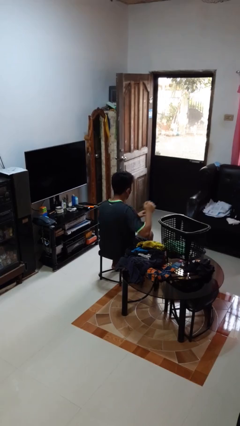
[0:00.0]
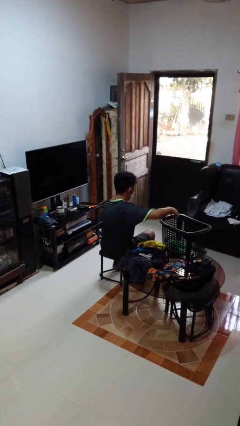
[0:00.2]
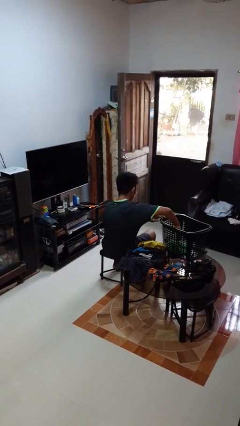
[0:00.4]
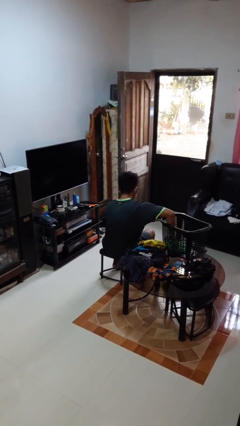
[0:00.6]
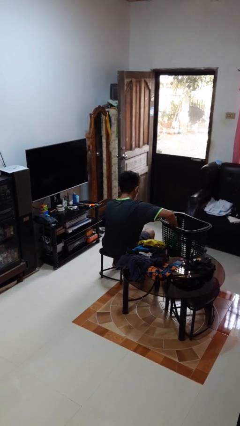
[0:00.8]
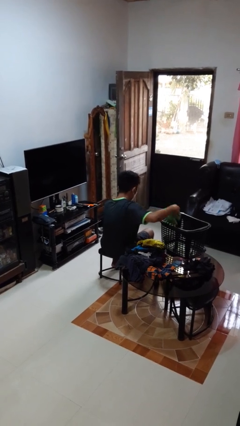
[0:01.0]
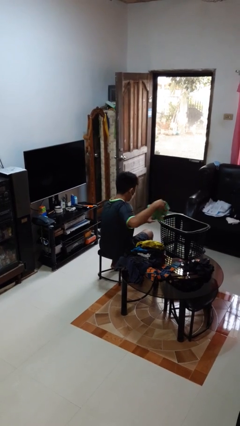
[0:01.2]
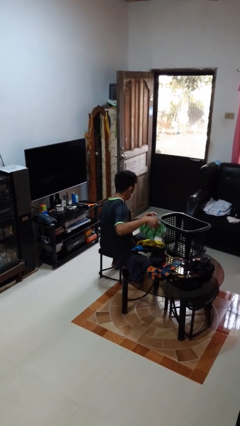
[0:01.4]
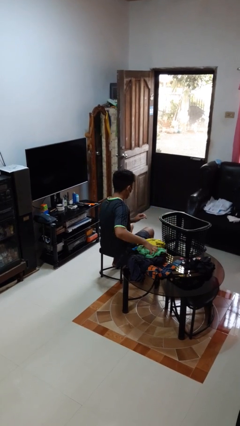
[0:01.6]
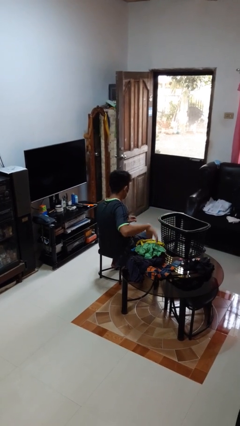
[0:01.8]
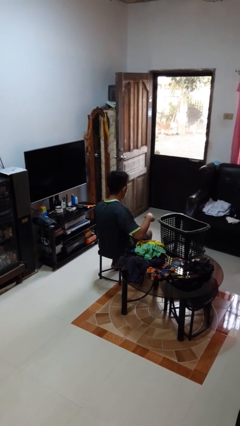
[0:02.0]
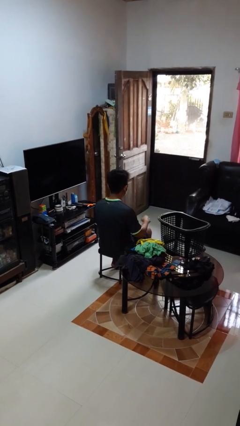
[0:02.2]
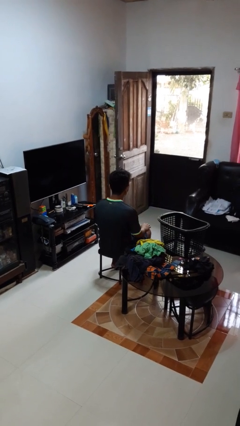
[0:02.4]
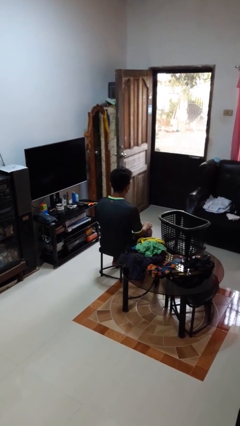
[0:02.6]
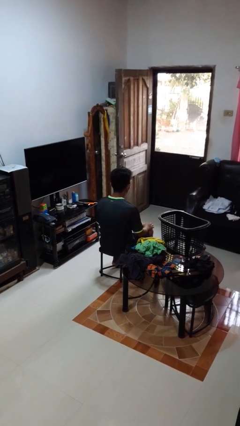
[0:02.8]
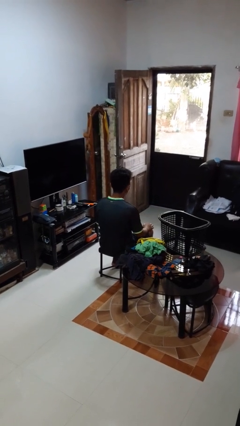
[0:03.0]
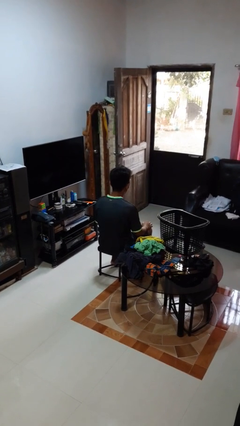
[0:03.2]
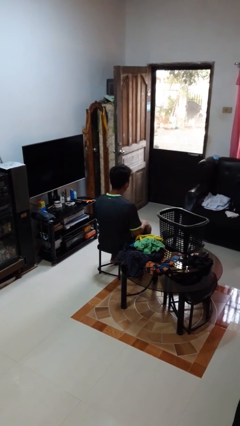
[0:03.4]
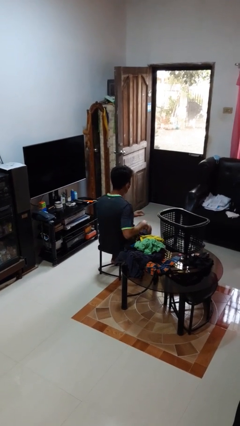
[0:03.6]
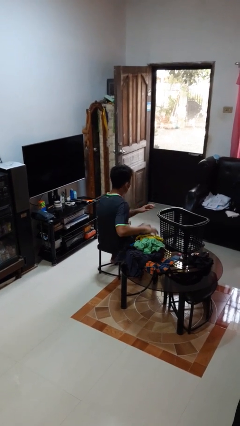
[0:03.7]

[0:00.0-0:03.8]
person takes object from basket

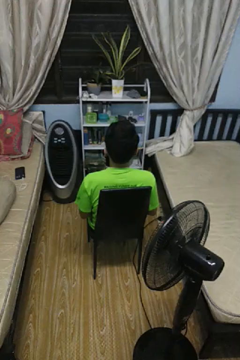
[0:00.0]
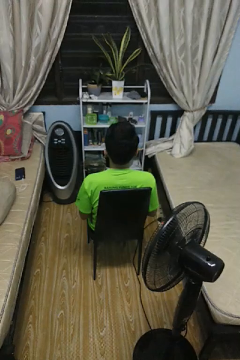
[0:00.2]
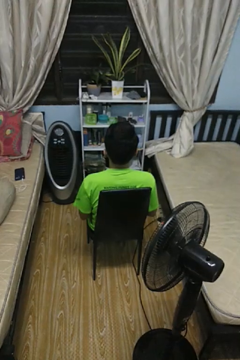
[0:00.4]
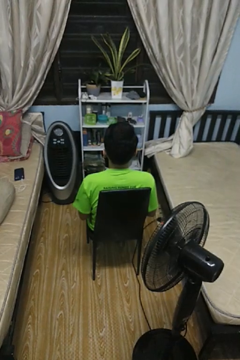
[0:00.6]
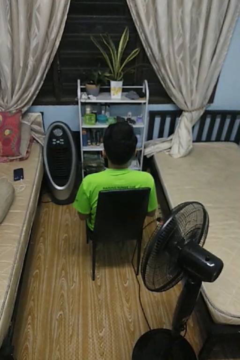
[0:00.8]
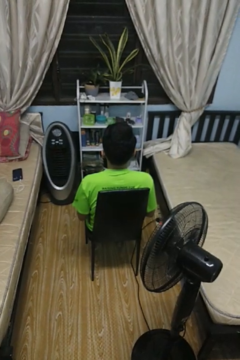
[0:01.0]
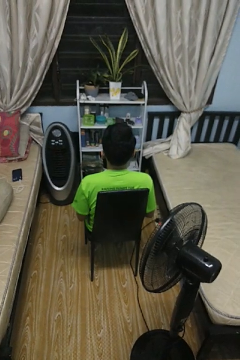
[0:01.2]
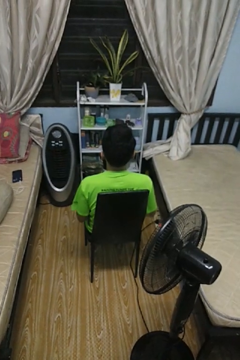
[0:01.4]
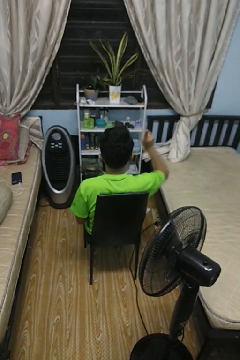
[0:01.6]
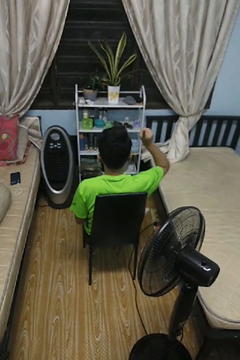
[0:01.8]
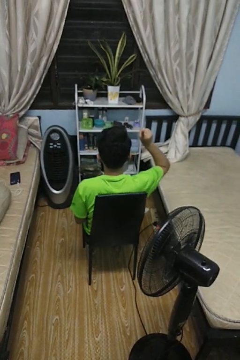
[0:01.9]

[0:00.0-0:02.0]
person gestures number one

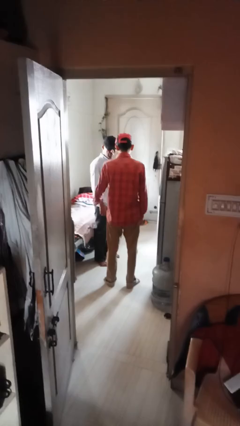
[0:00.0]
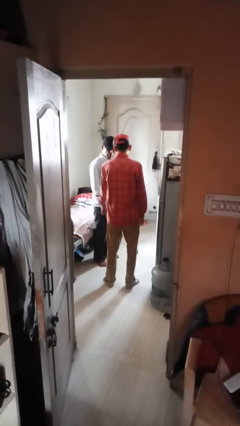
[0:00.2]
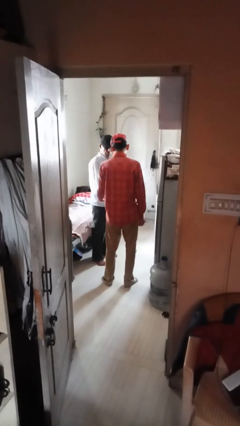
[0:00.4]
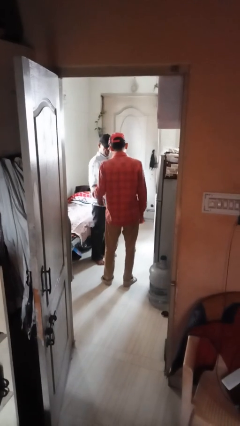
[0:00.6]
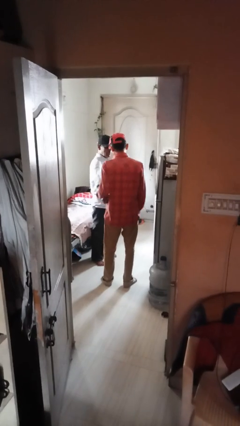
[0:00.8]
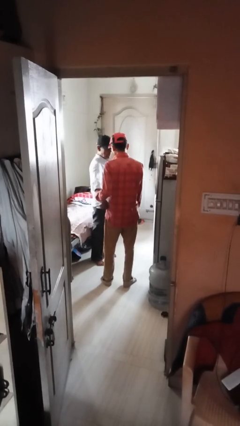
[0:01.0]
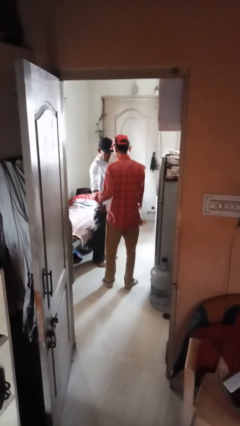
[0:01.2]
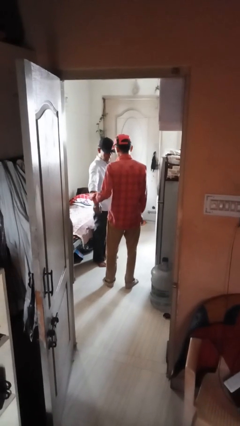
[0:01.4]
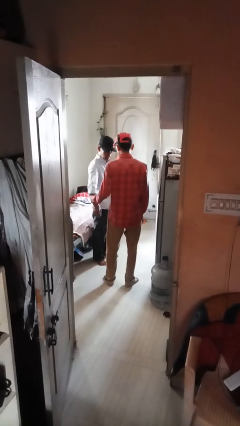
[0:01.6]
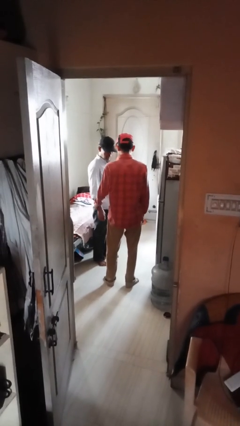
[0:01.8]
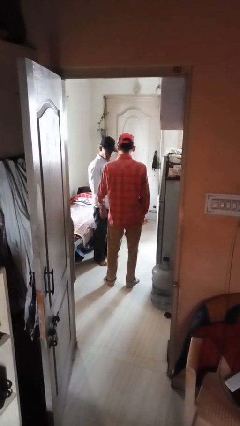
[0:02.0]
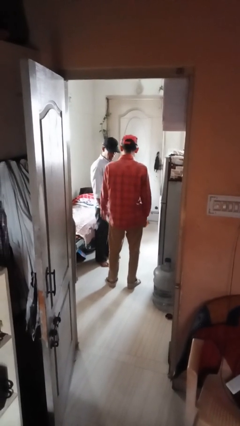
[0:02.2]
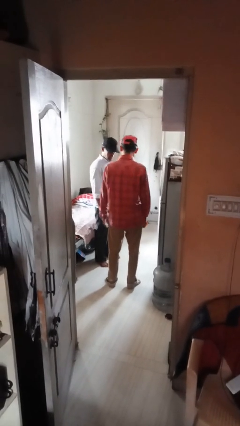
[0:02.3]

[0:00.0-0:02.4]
person grabs person by forearm

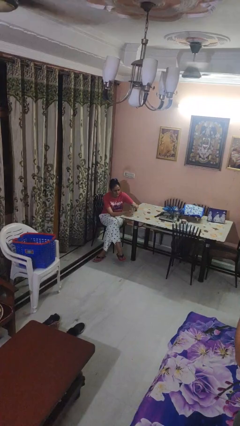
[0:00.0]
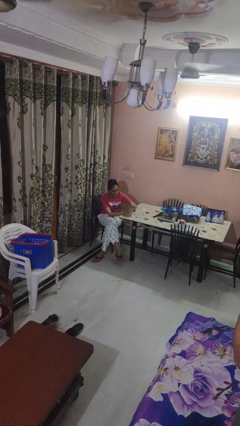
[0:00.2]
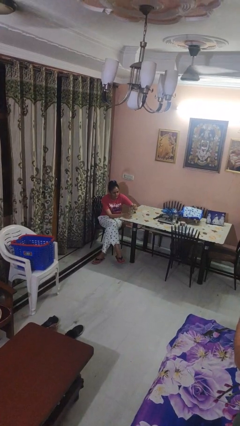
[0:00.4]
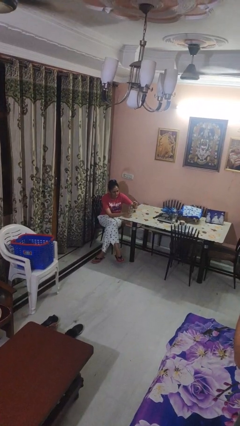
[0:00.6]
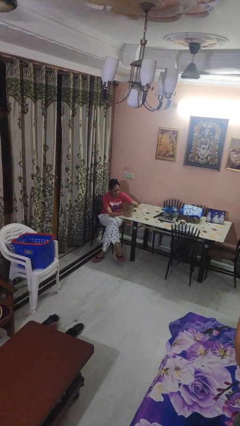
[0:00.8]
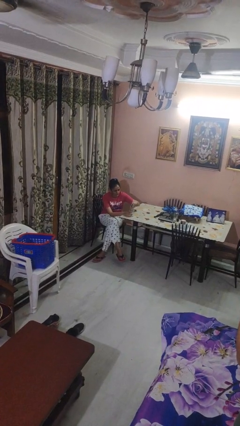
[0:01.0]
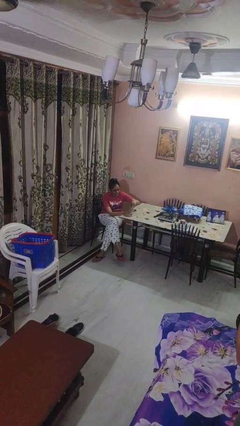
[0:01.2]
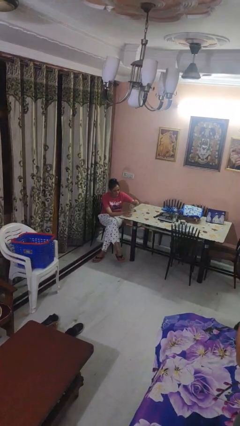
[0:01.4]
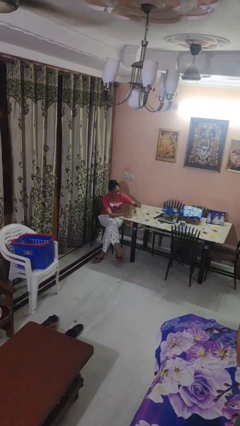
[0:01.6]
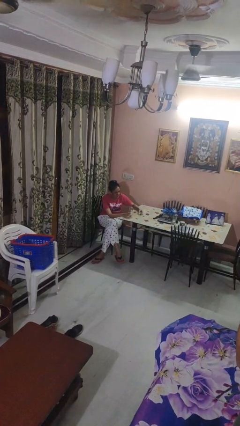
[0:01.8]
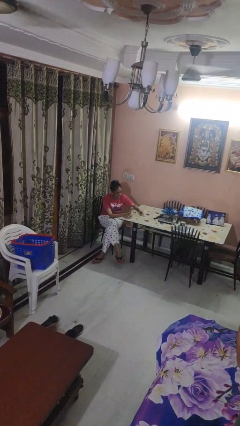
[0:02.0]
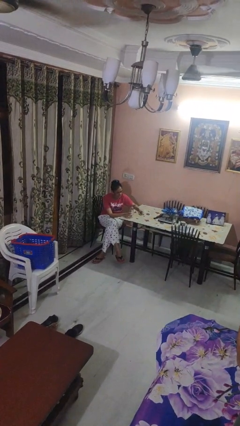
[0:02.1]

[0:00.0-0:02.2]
person unscrews lid from bottle

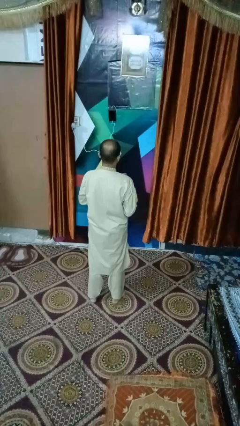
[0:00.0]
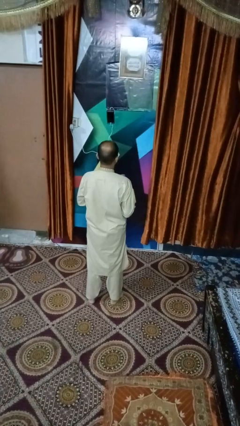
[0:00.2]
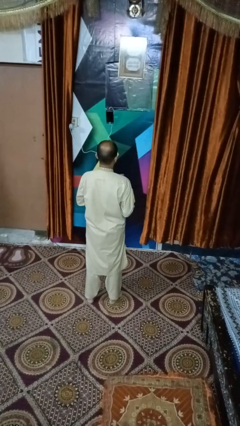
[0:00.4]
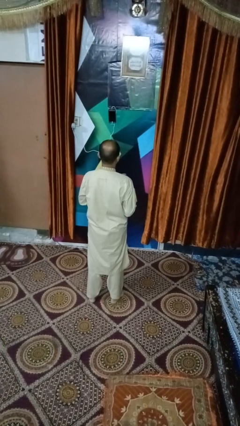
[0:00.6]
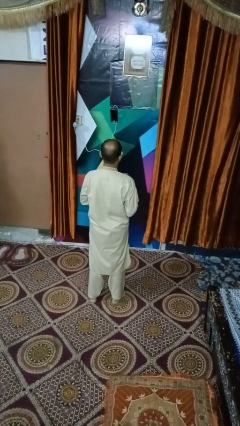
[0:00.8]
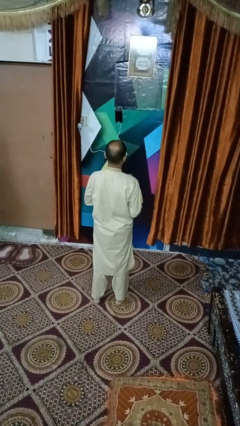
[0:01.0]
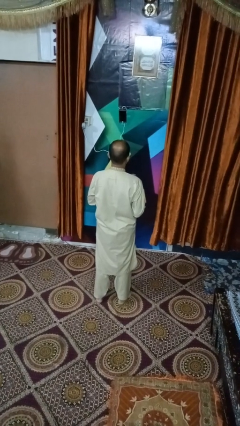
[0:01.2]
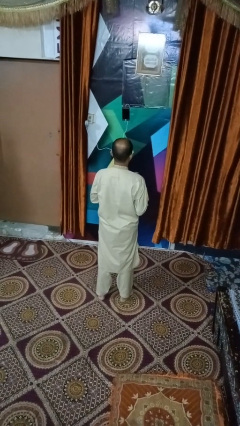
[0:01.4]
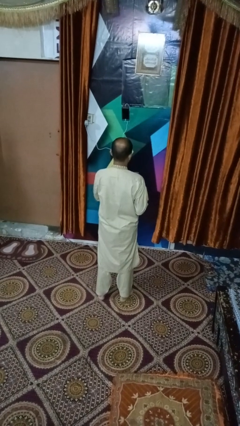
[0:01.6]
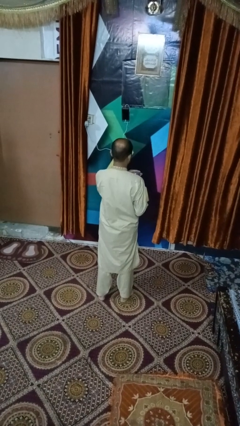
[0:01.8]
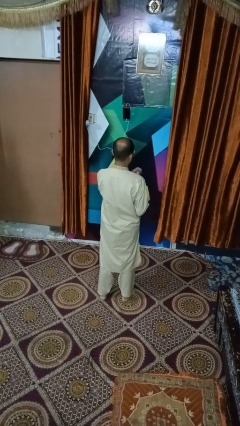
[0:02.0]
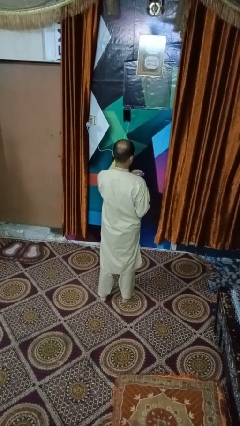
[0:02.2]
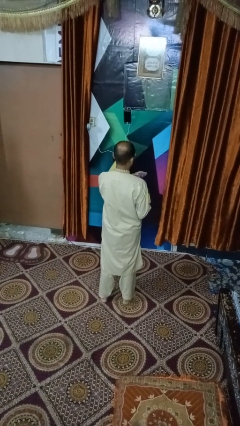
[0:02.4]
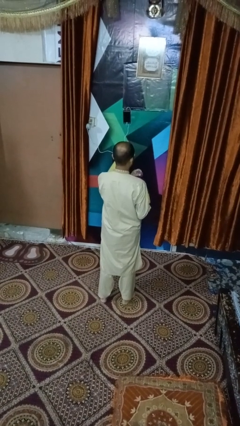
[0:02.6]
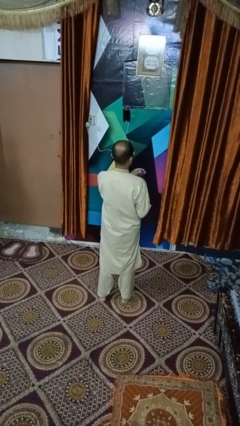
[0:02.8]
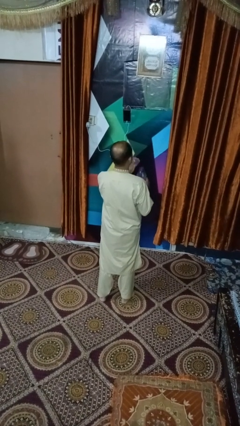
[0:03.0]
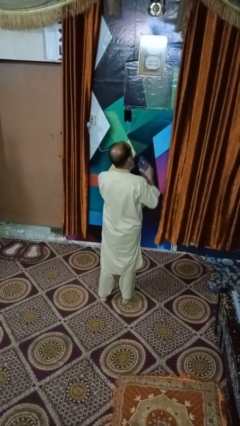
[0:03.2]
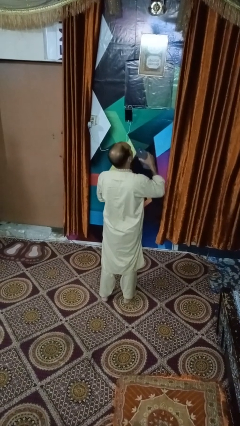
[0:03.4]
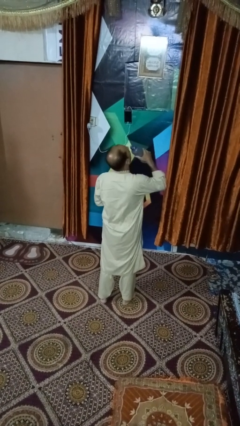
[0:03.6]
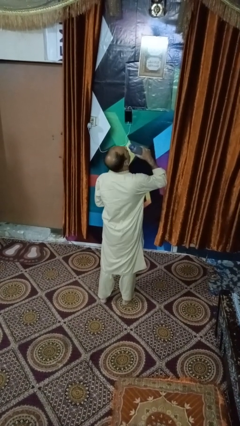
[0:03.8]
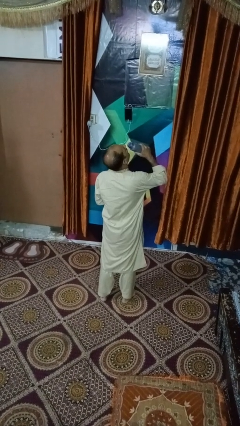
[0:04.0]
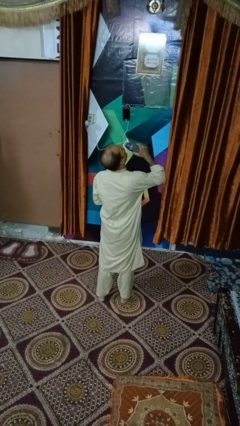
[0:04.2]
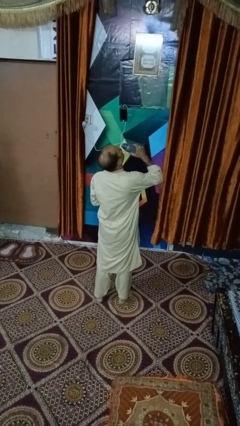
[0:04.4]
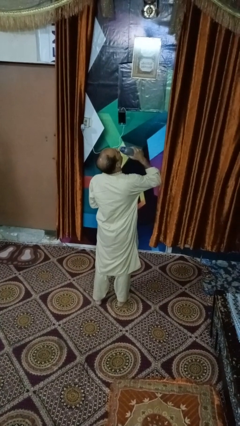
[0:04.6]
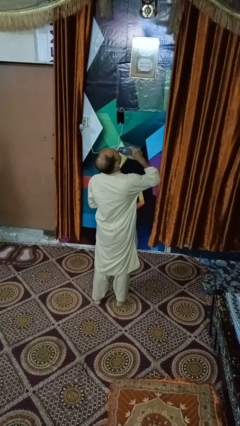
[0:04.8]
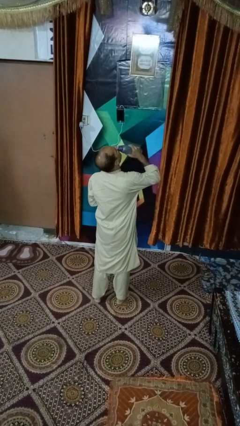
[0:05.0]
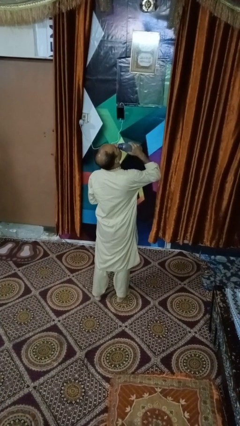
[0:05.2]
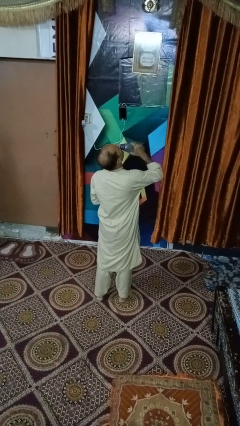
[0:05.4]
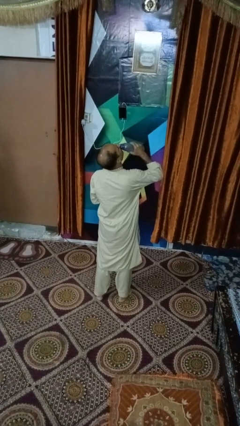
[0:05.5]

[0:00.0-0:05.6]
person drinks from bottle

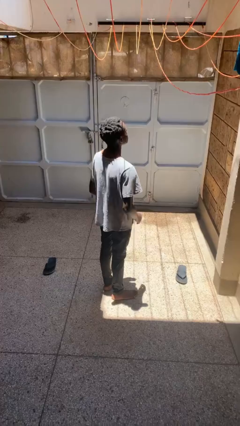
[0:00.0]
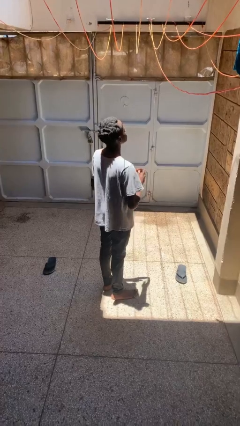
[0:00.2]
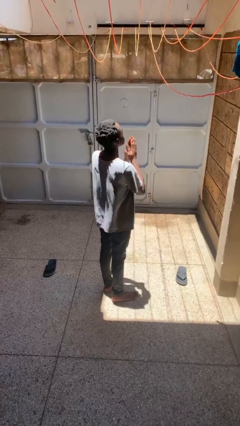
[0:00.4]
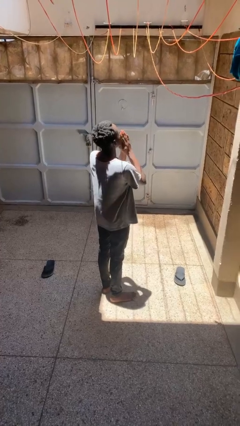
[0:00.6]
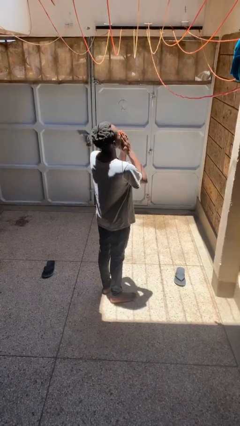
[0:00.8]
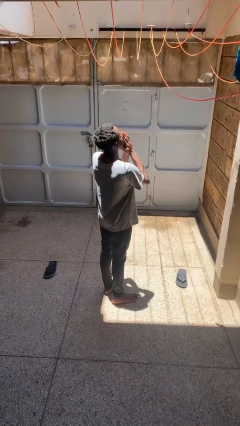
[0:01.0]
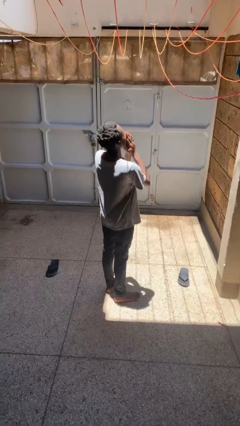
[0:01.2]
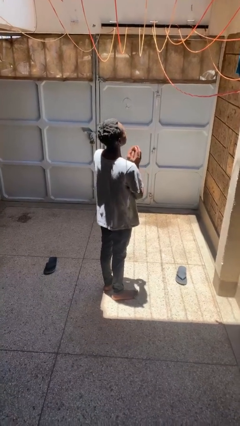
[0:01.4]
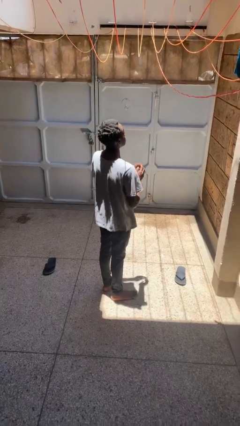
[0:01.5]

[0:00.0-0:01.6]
person prays

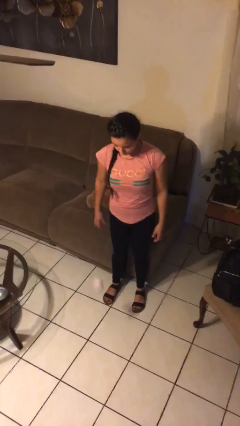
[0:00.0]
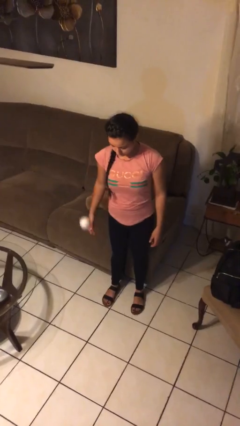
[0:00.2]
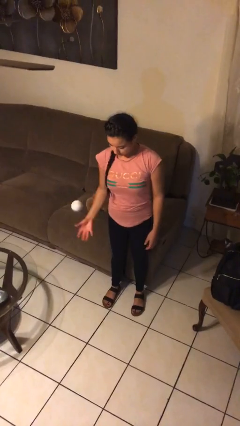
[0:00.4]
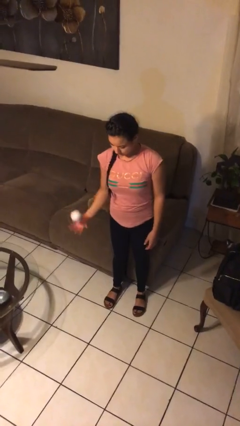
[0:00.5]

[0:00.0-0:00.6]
person bounces ball on floor
